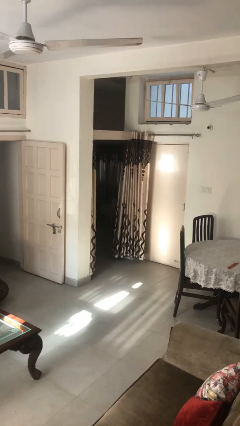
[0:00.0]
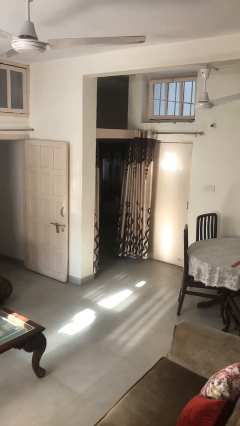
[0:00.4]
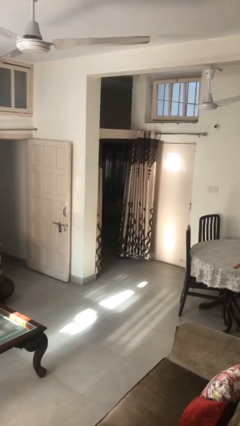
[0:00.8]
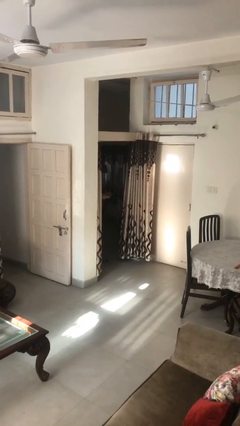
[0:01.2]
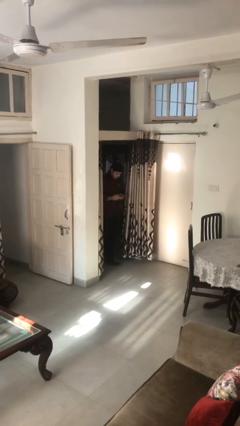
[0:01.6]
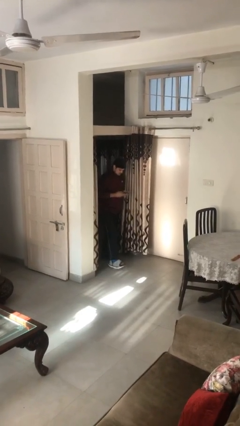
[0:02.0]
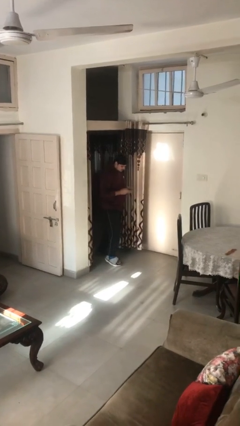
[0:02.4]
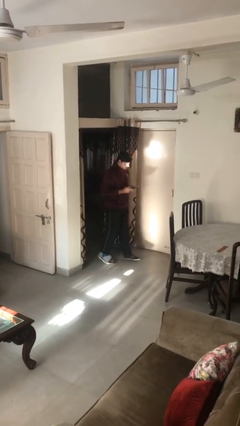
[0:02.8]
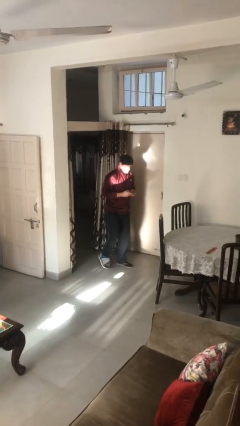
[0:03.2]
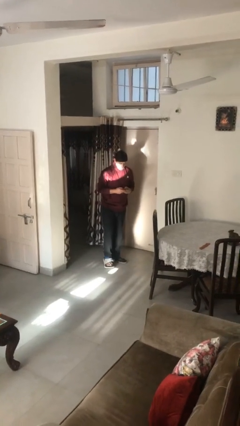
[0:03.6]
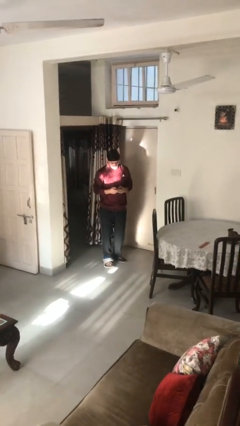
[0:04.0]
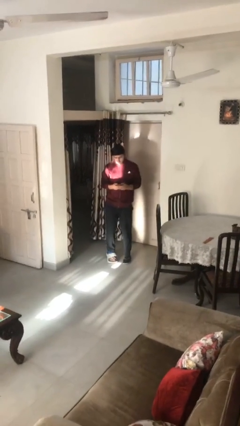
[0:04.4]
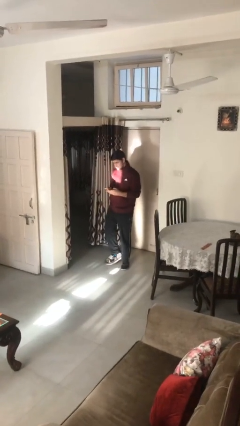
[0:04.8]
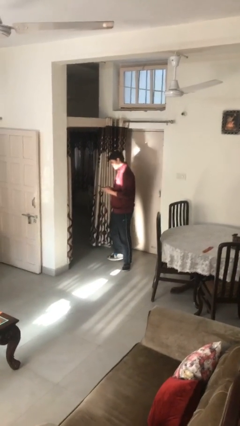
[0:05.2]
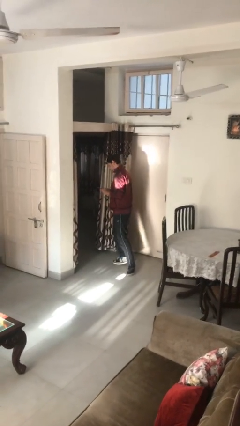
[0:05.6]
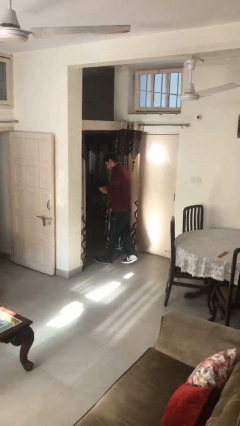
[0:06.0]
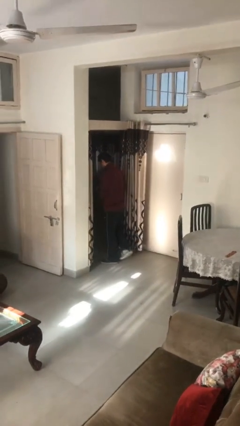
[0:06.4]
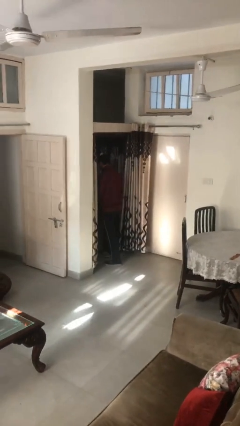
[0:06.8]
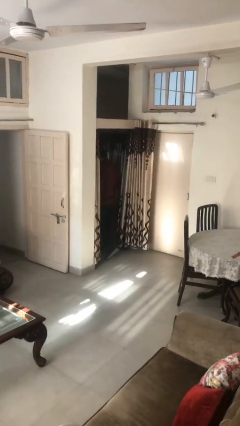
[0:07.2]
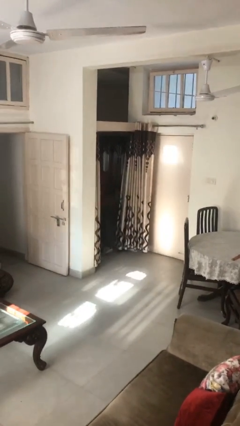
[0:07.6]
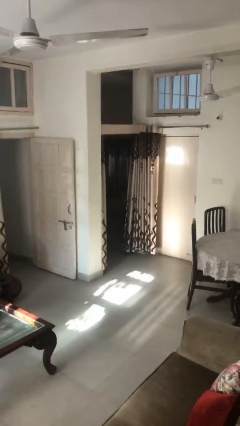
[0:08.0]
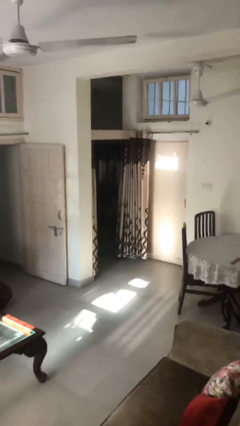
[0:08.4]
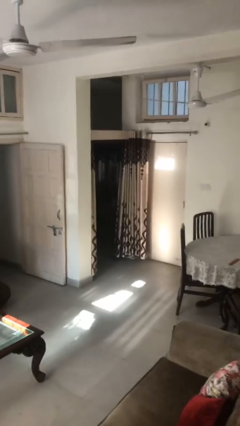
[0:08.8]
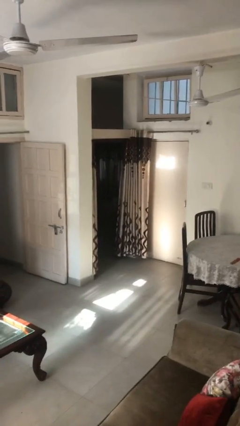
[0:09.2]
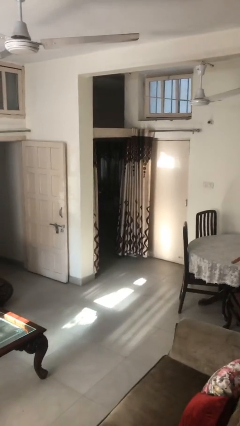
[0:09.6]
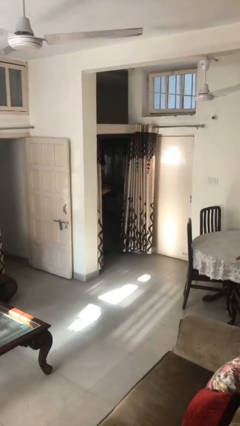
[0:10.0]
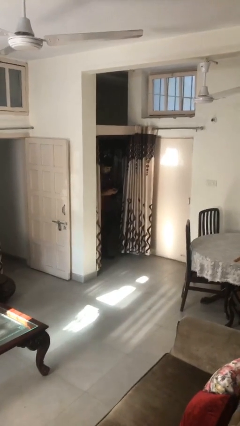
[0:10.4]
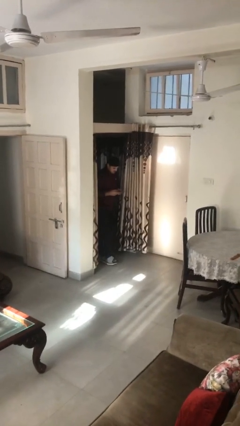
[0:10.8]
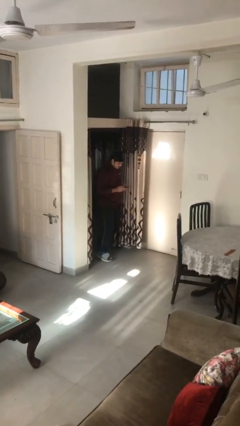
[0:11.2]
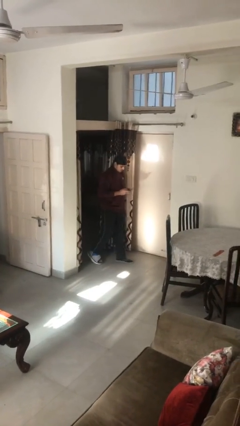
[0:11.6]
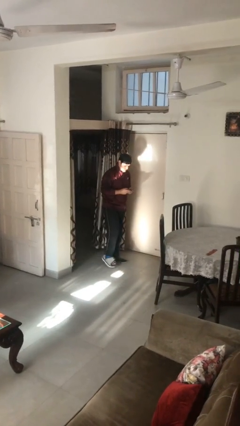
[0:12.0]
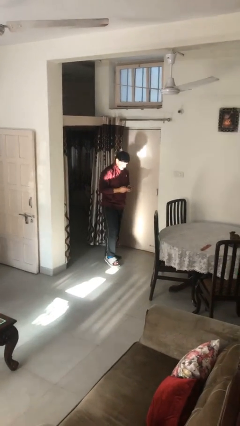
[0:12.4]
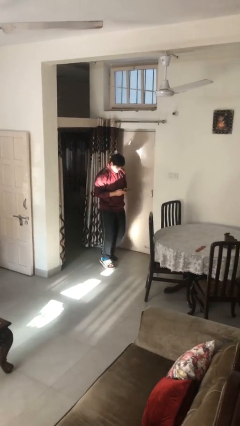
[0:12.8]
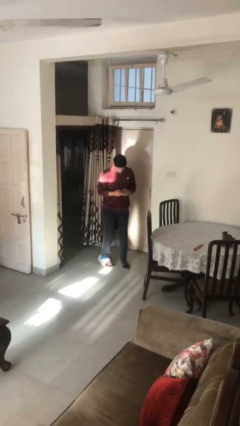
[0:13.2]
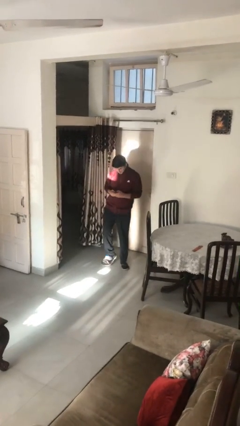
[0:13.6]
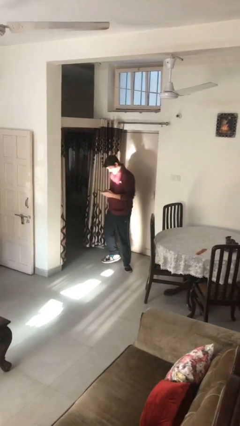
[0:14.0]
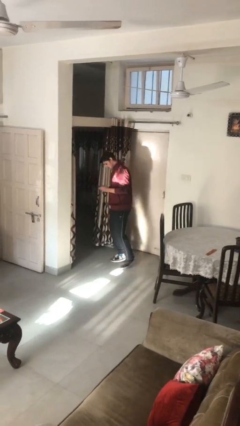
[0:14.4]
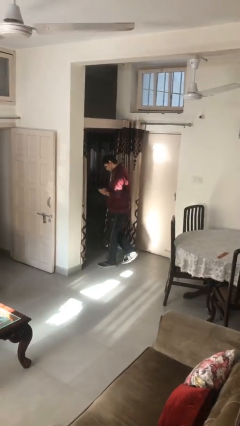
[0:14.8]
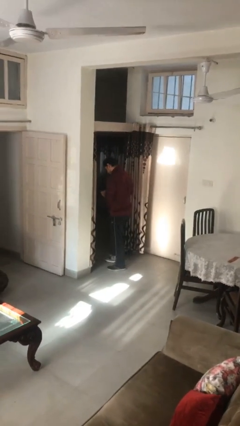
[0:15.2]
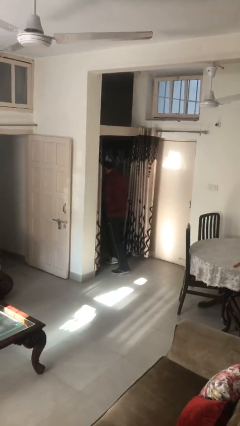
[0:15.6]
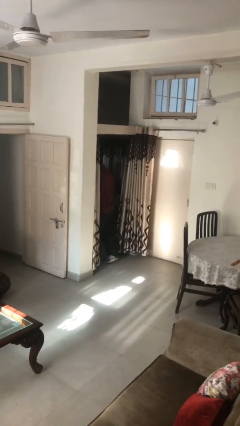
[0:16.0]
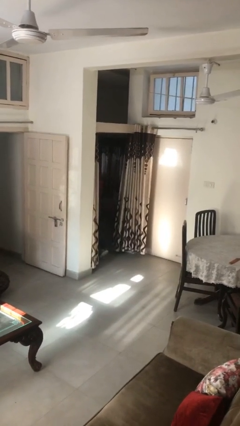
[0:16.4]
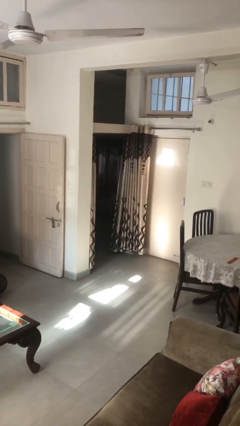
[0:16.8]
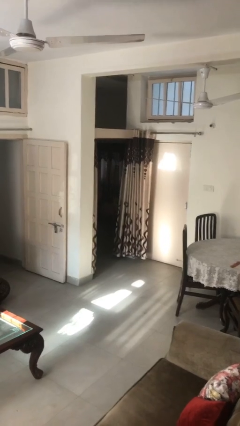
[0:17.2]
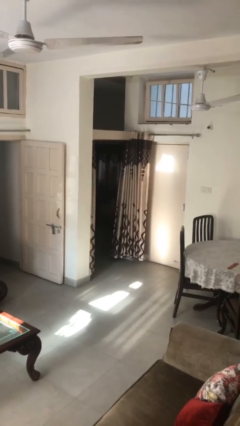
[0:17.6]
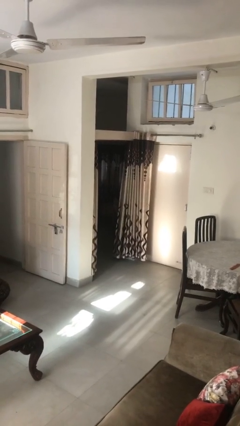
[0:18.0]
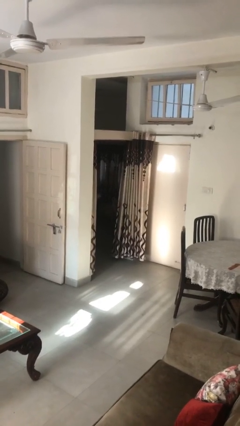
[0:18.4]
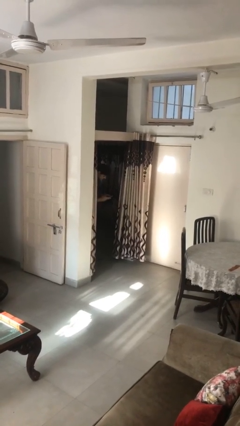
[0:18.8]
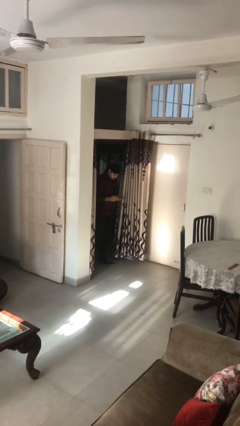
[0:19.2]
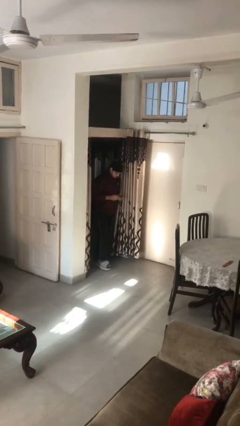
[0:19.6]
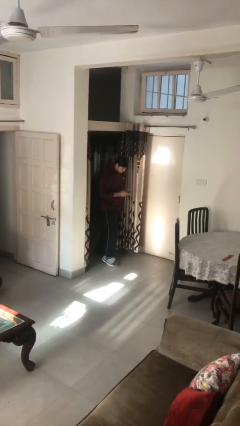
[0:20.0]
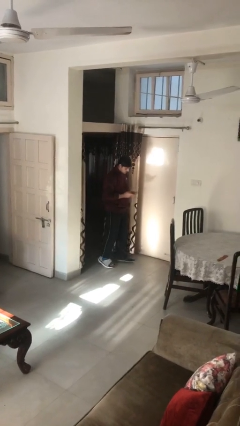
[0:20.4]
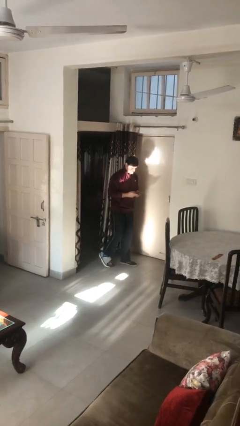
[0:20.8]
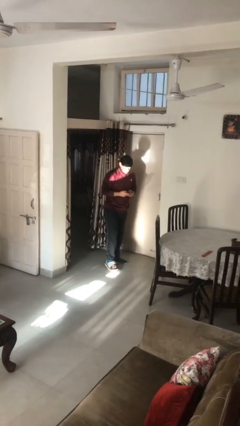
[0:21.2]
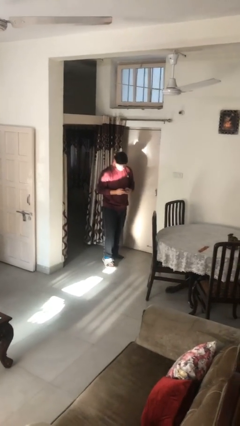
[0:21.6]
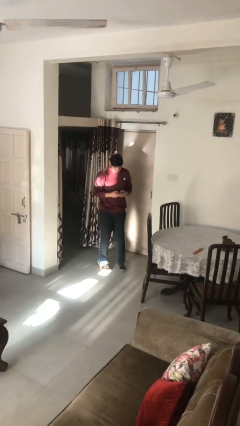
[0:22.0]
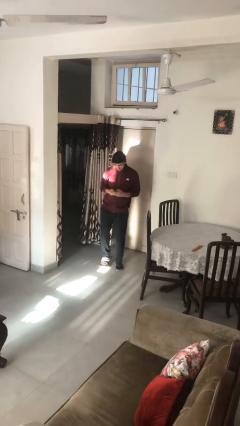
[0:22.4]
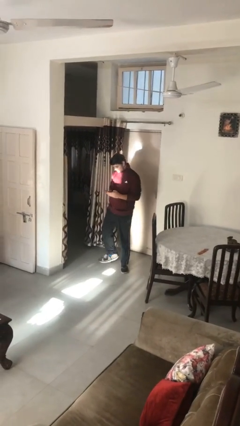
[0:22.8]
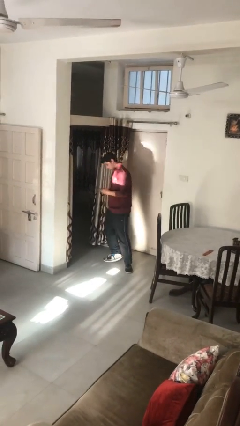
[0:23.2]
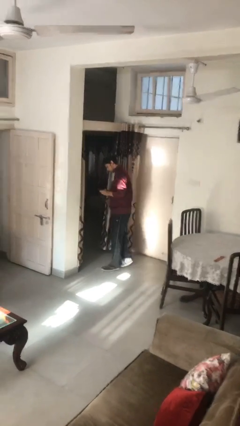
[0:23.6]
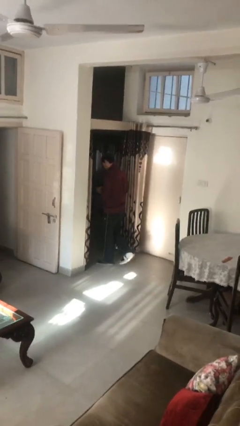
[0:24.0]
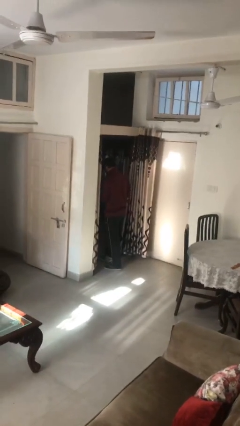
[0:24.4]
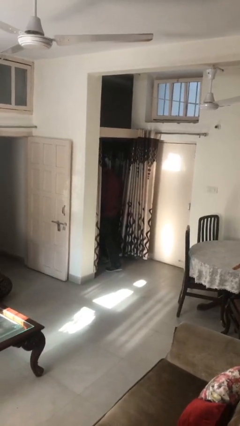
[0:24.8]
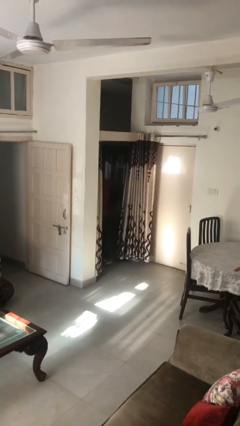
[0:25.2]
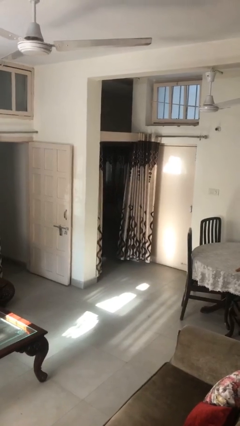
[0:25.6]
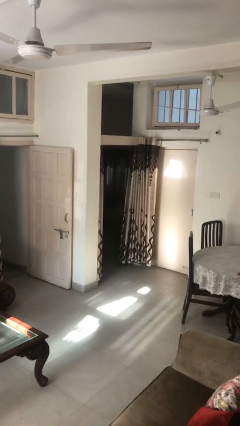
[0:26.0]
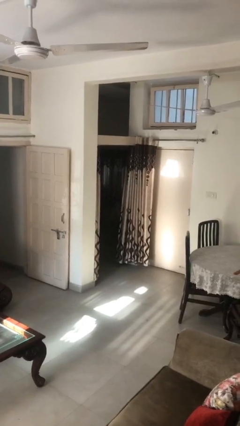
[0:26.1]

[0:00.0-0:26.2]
person texts on phone

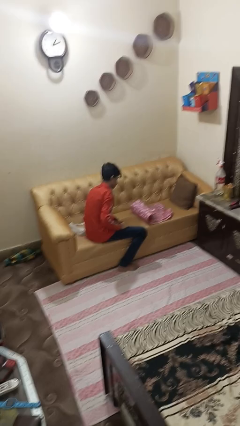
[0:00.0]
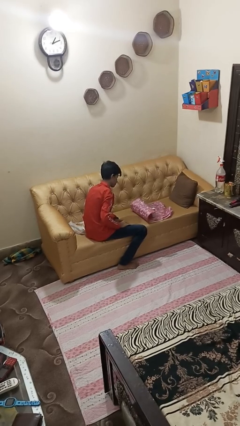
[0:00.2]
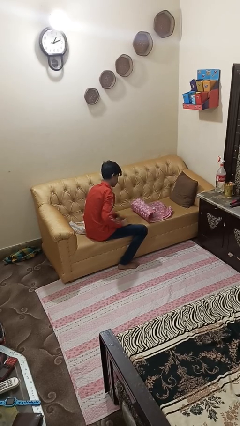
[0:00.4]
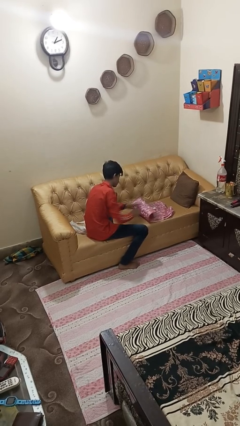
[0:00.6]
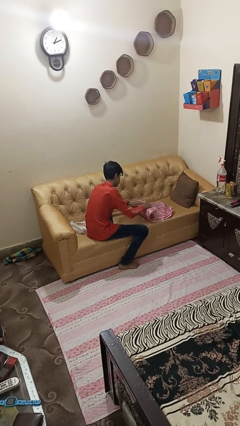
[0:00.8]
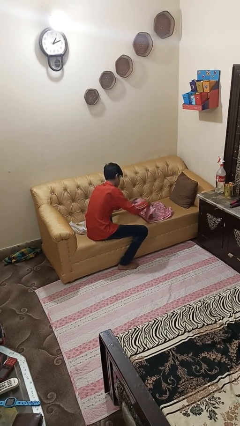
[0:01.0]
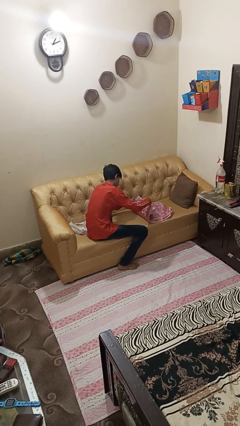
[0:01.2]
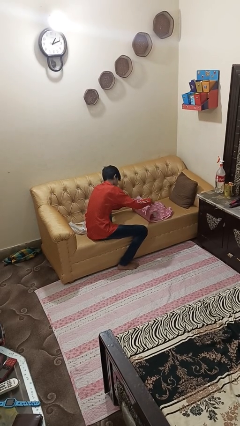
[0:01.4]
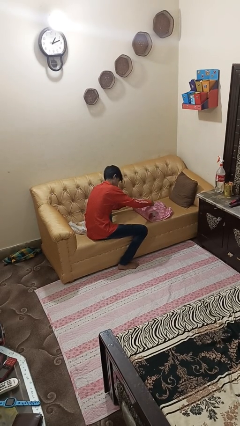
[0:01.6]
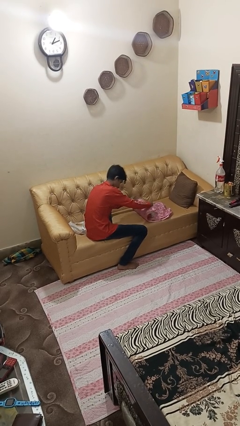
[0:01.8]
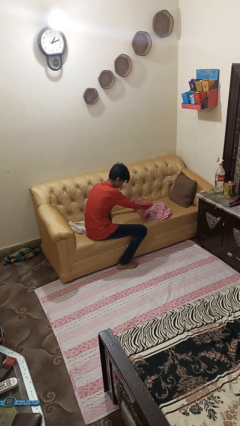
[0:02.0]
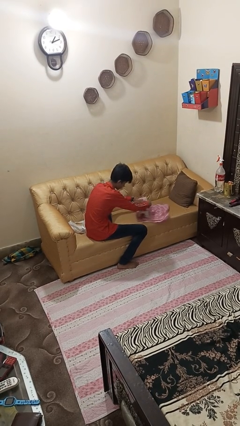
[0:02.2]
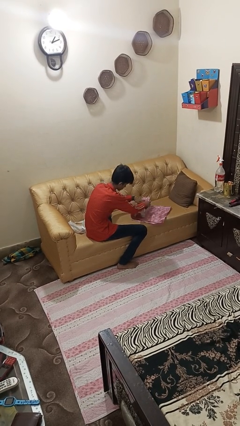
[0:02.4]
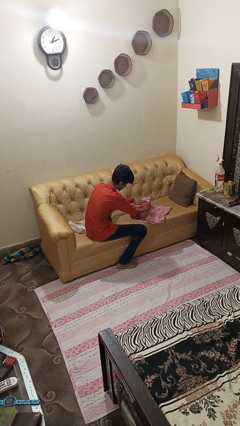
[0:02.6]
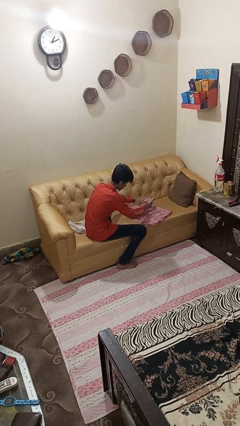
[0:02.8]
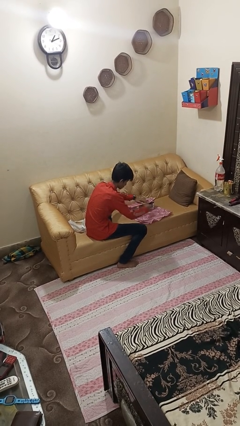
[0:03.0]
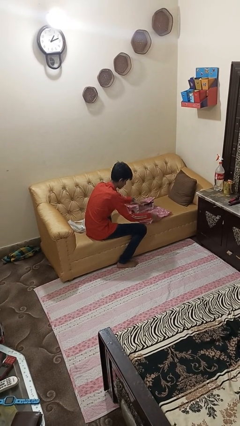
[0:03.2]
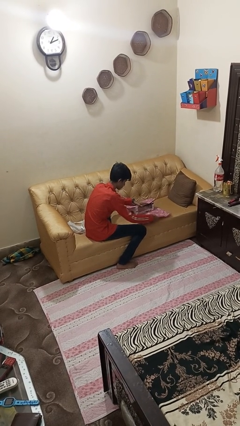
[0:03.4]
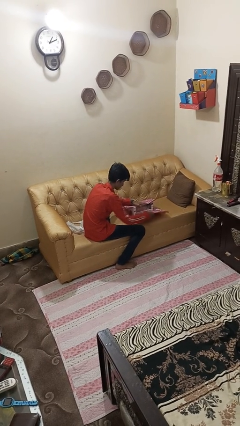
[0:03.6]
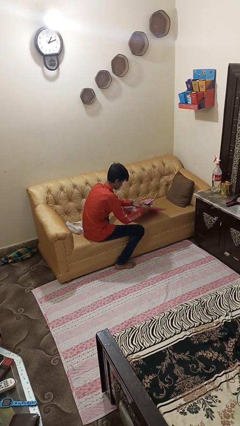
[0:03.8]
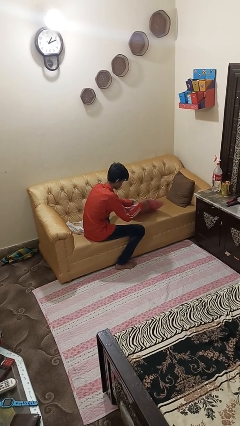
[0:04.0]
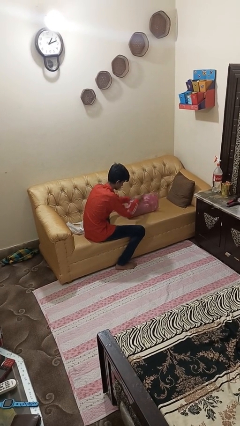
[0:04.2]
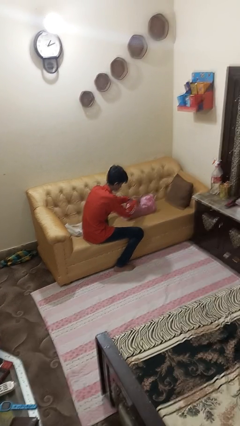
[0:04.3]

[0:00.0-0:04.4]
person wraps box

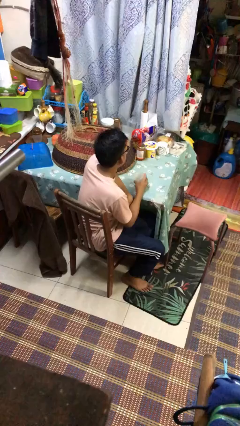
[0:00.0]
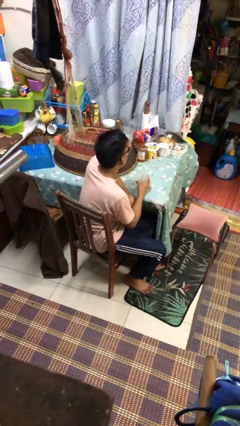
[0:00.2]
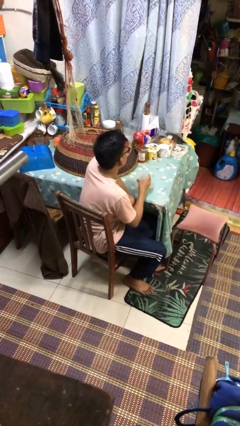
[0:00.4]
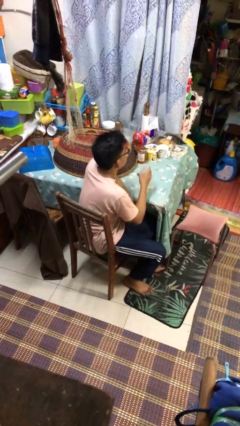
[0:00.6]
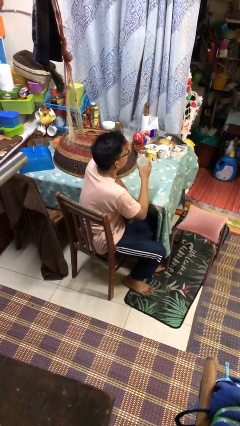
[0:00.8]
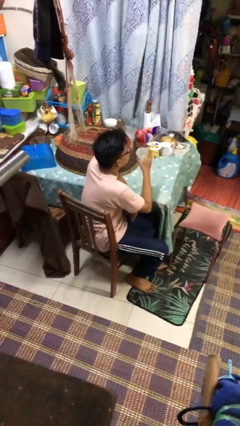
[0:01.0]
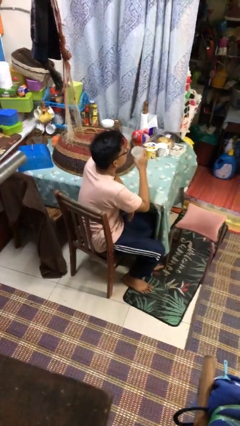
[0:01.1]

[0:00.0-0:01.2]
person picks up object from table
